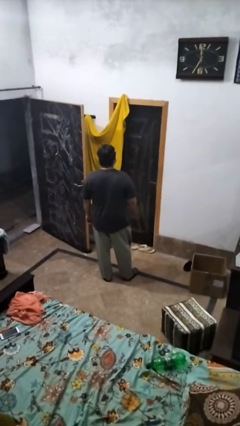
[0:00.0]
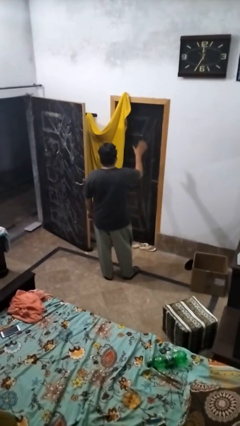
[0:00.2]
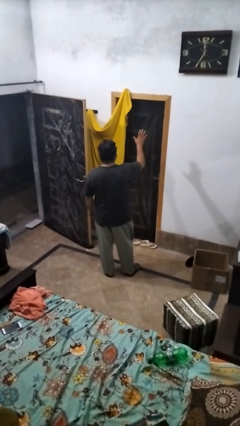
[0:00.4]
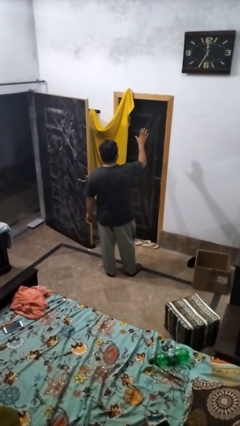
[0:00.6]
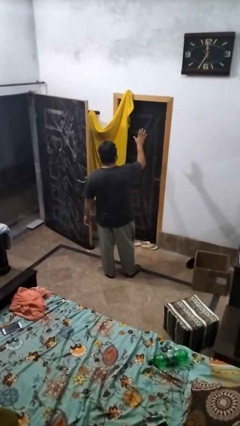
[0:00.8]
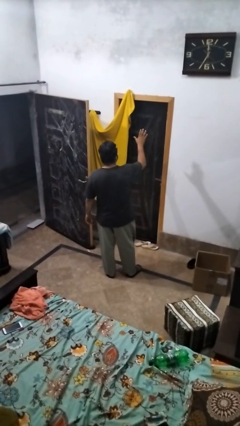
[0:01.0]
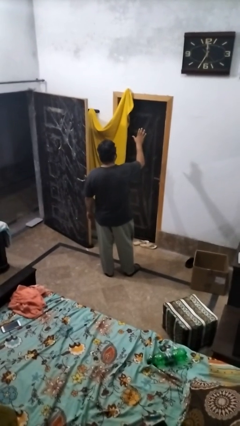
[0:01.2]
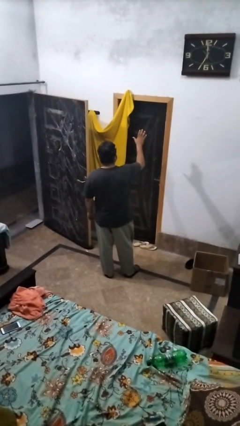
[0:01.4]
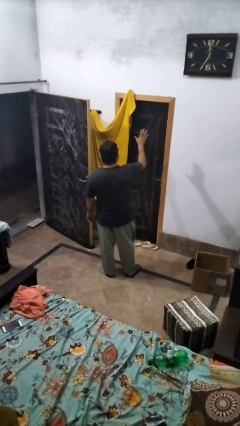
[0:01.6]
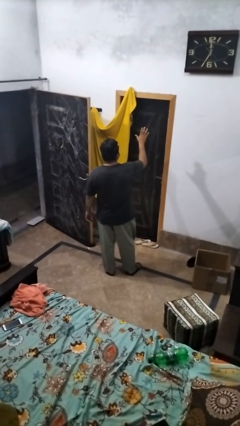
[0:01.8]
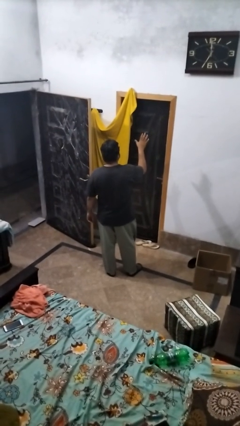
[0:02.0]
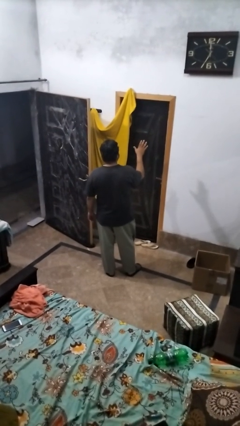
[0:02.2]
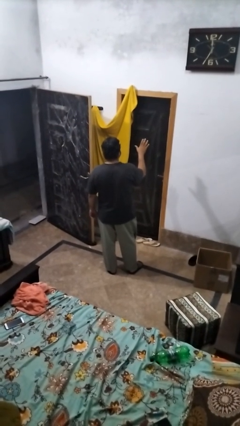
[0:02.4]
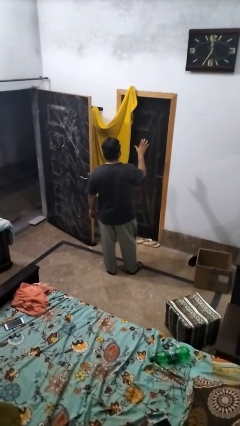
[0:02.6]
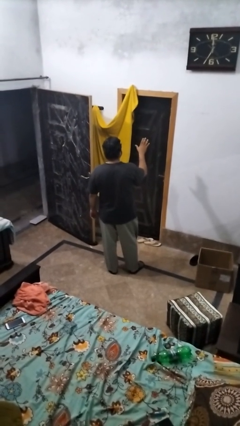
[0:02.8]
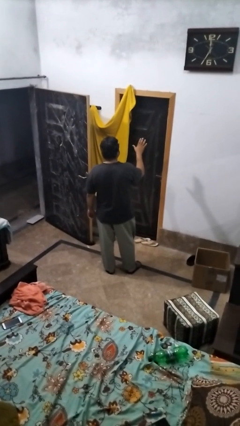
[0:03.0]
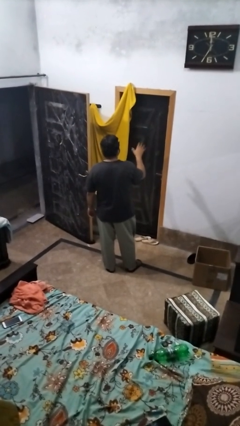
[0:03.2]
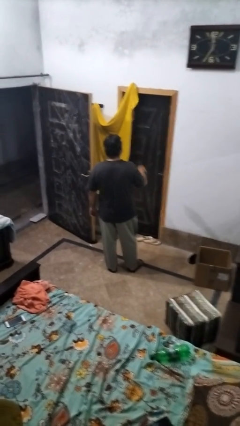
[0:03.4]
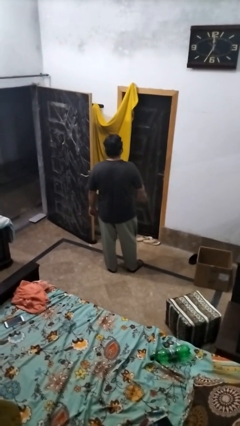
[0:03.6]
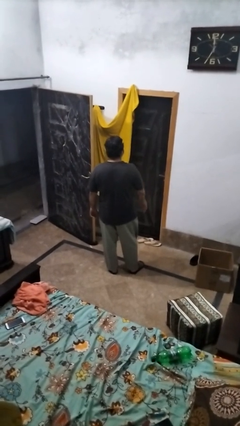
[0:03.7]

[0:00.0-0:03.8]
person gestures stop

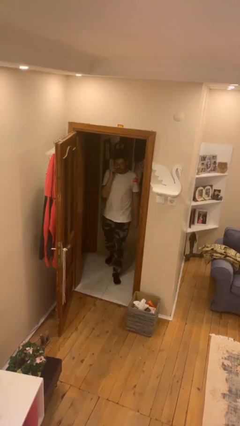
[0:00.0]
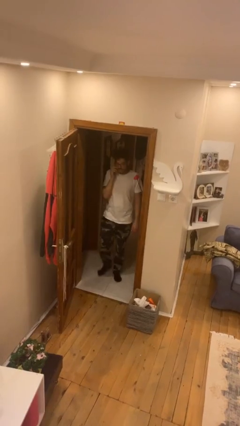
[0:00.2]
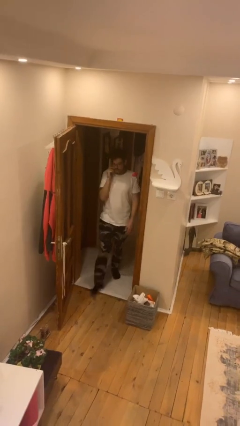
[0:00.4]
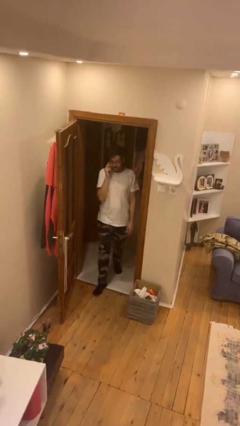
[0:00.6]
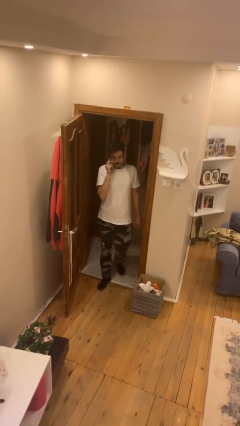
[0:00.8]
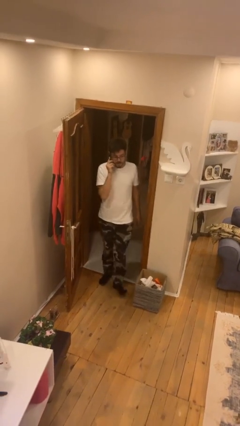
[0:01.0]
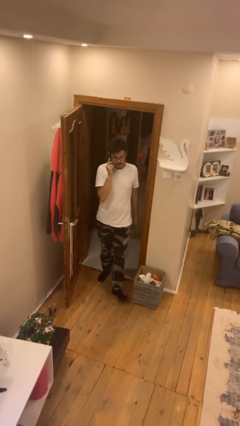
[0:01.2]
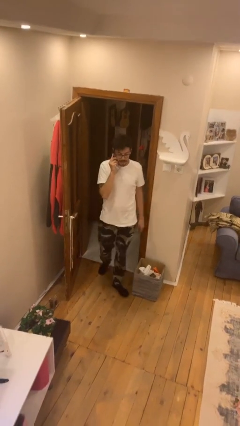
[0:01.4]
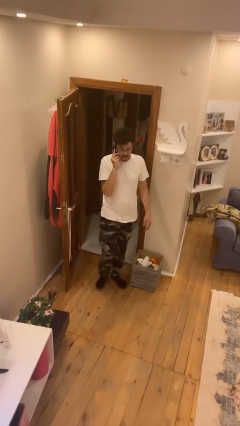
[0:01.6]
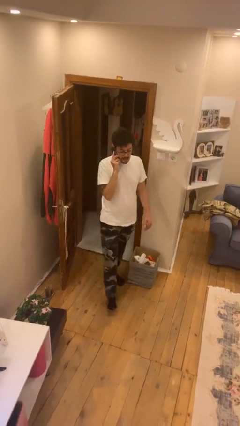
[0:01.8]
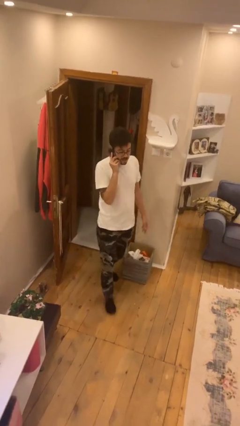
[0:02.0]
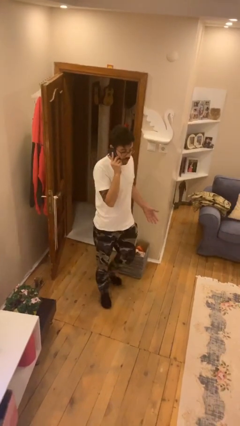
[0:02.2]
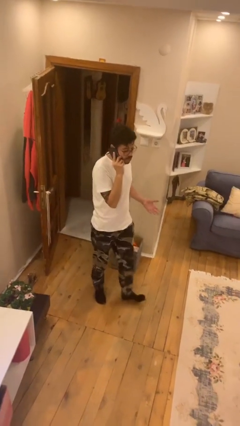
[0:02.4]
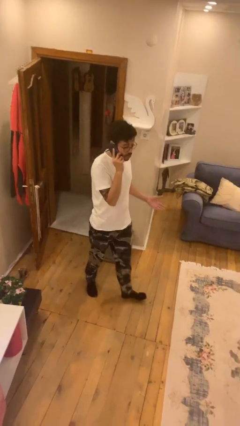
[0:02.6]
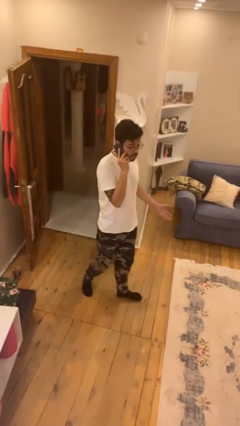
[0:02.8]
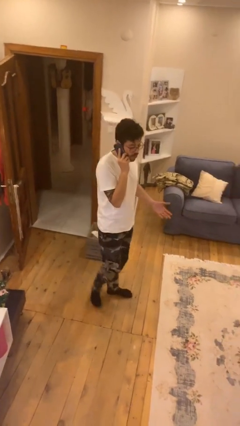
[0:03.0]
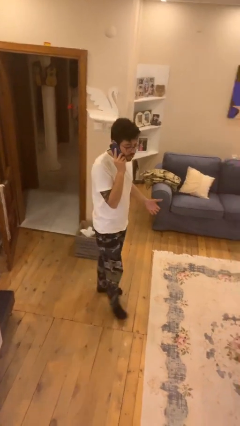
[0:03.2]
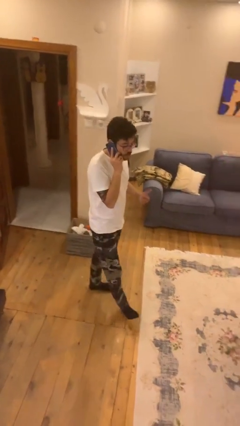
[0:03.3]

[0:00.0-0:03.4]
person enters scene through structure

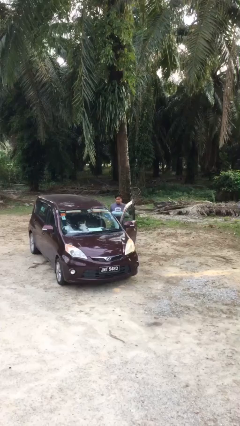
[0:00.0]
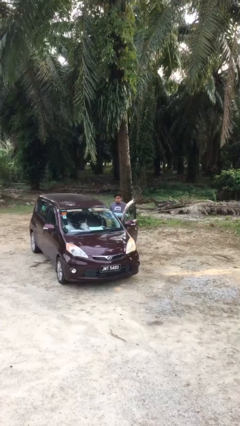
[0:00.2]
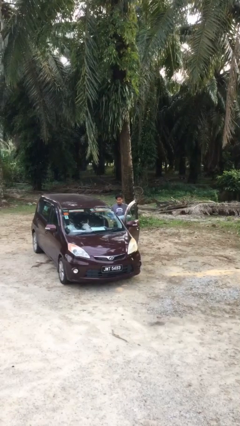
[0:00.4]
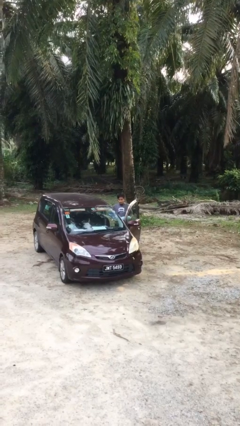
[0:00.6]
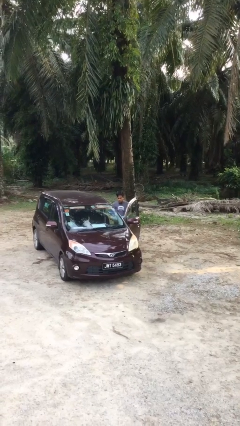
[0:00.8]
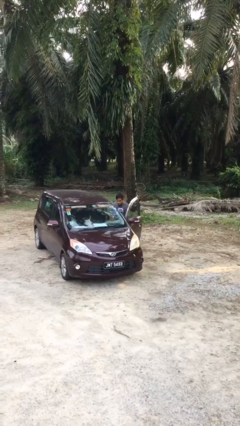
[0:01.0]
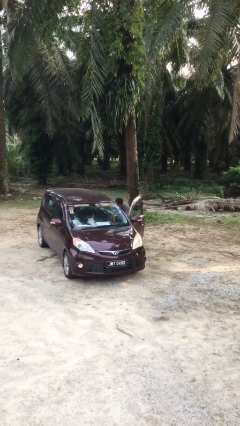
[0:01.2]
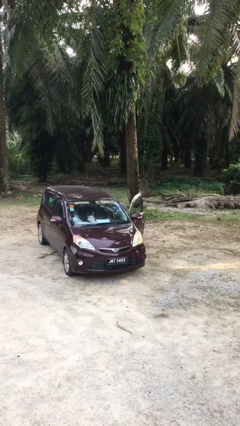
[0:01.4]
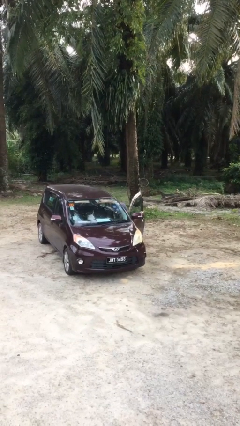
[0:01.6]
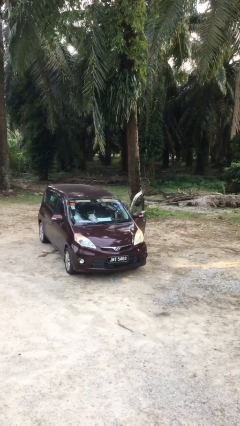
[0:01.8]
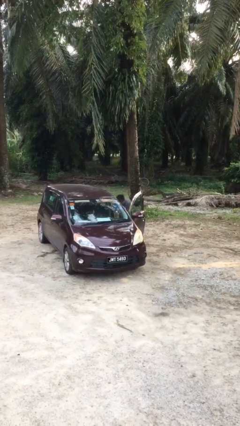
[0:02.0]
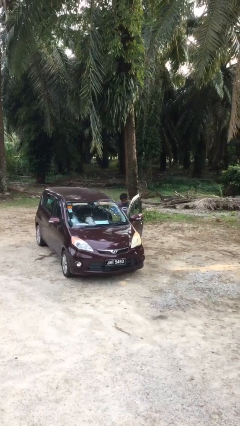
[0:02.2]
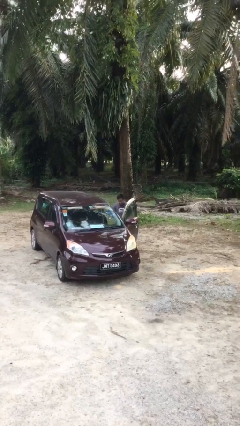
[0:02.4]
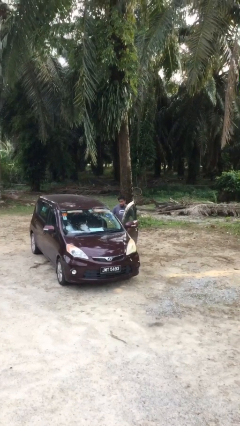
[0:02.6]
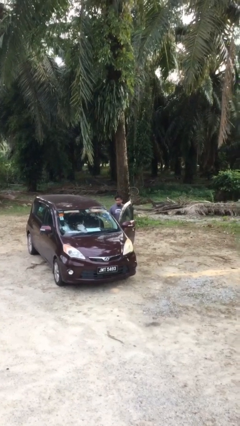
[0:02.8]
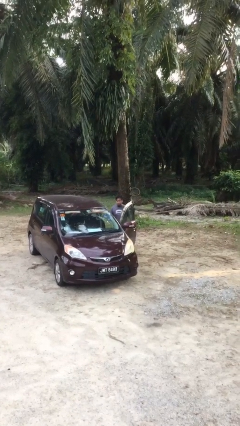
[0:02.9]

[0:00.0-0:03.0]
person loads car

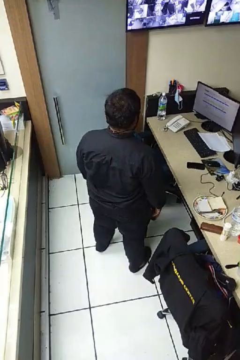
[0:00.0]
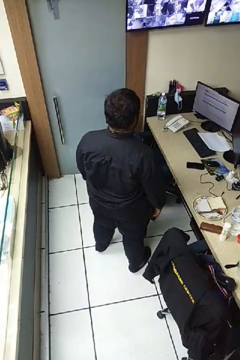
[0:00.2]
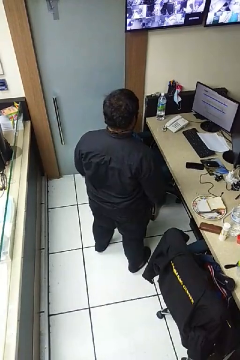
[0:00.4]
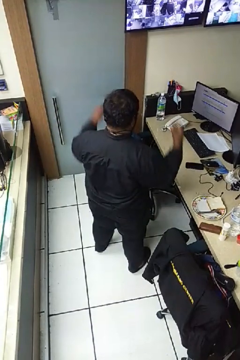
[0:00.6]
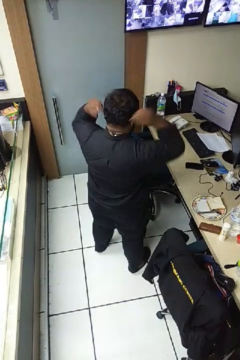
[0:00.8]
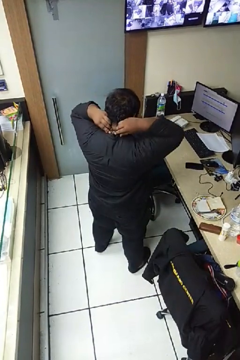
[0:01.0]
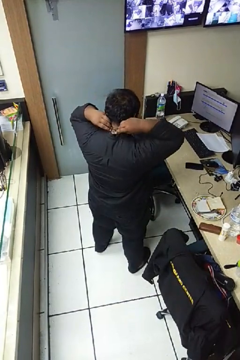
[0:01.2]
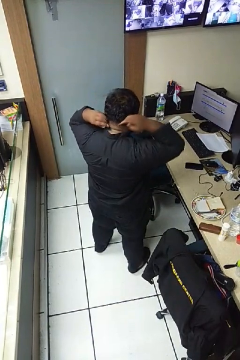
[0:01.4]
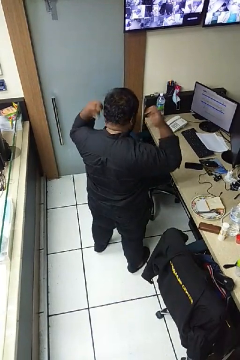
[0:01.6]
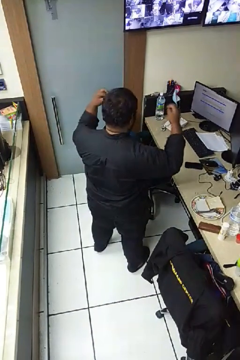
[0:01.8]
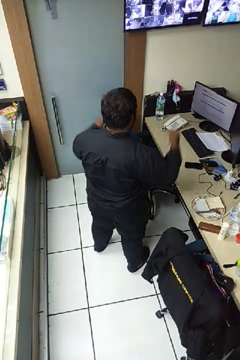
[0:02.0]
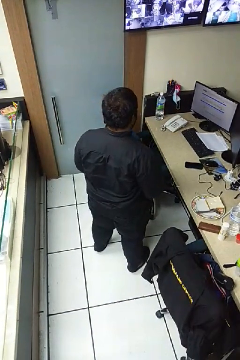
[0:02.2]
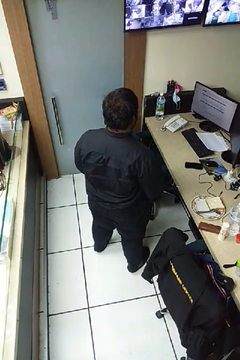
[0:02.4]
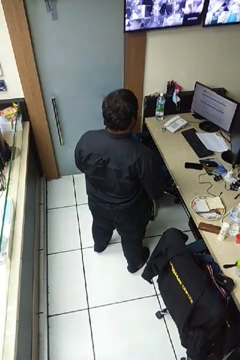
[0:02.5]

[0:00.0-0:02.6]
person takes off necklace

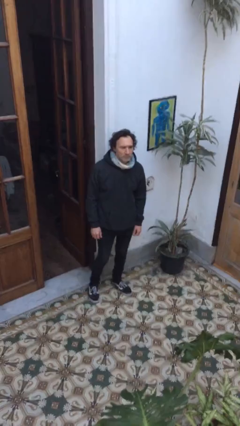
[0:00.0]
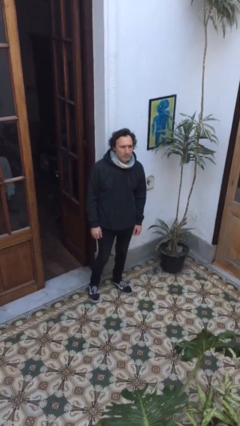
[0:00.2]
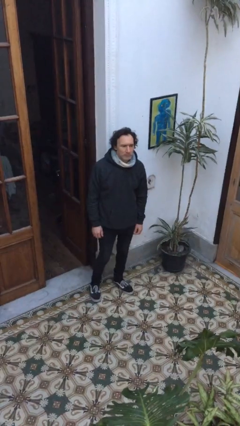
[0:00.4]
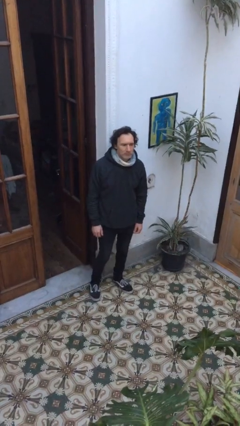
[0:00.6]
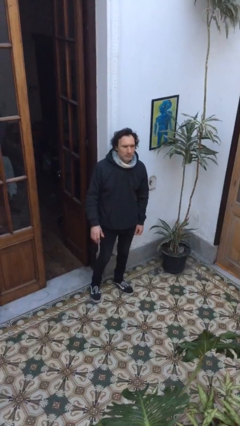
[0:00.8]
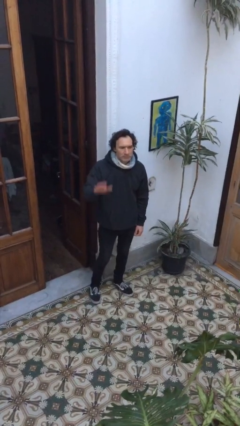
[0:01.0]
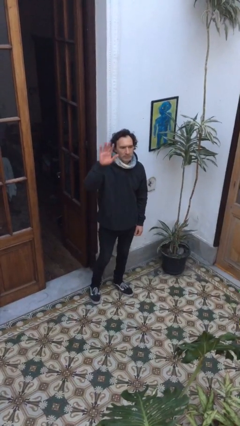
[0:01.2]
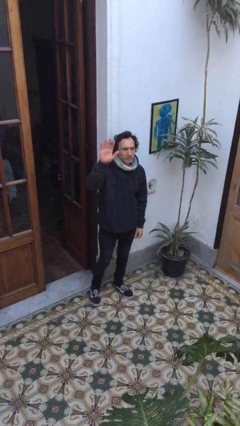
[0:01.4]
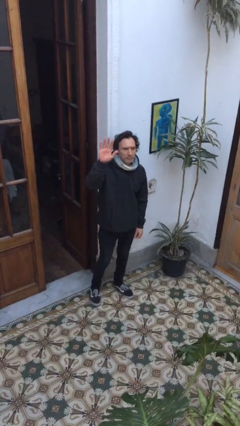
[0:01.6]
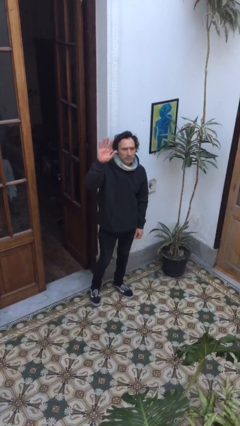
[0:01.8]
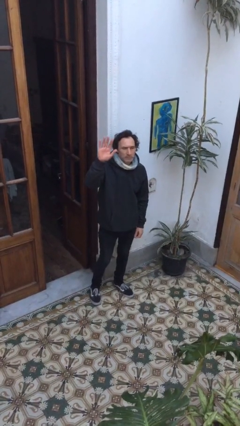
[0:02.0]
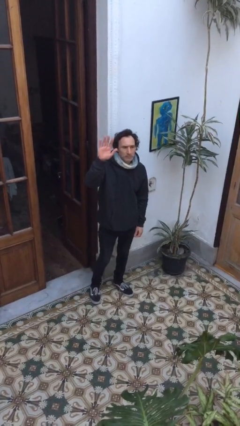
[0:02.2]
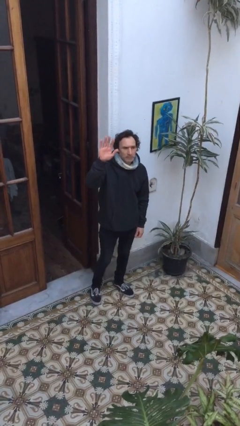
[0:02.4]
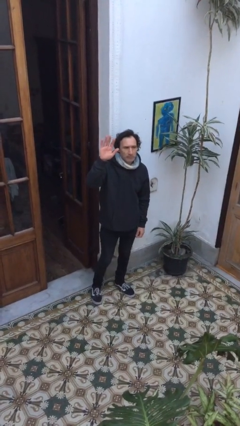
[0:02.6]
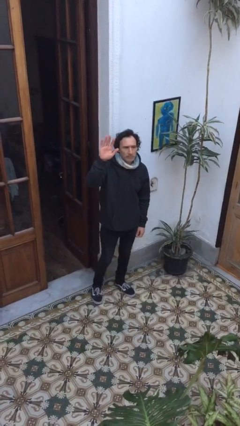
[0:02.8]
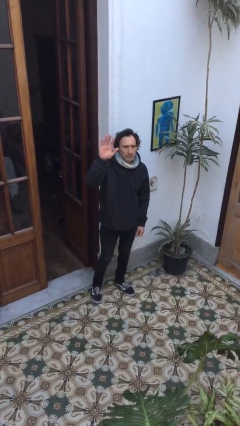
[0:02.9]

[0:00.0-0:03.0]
person gestures raise hand

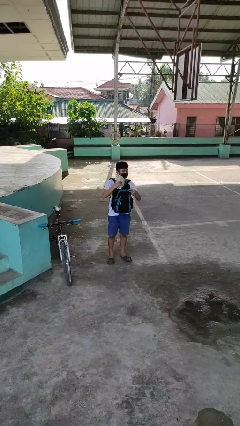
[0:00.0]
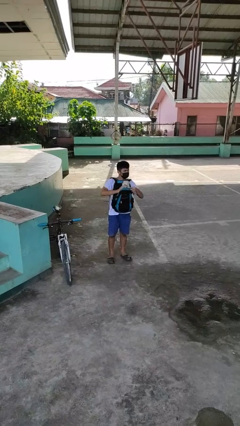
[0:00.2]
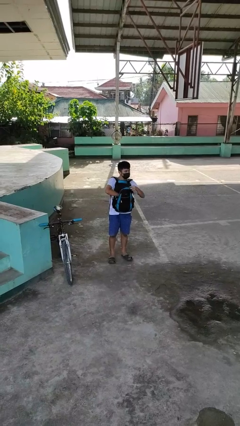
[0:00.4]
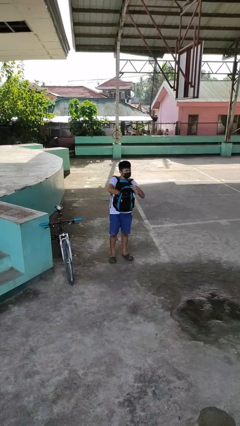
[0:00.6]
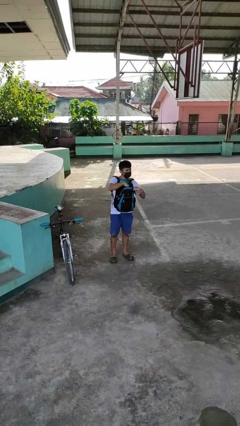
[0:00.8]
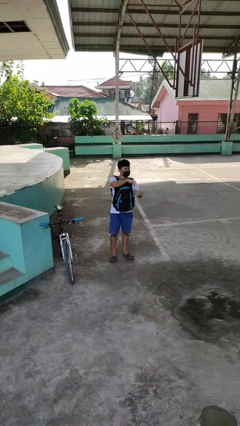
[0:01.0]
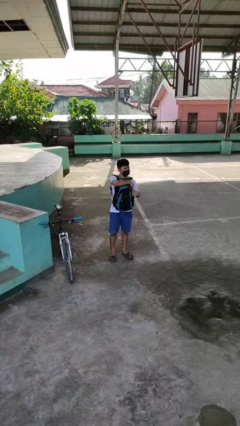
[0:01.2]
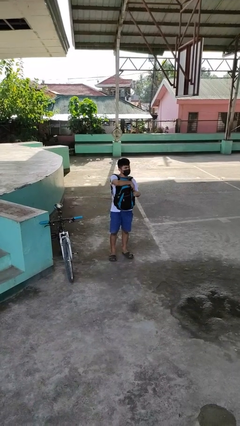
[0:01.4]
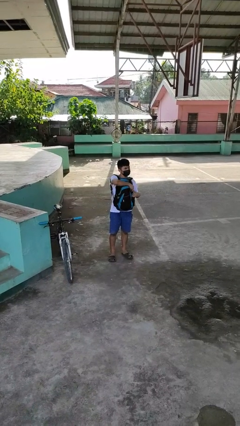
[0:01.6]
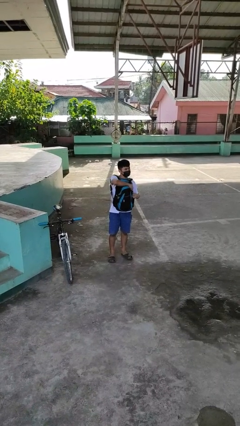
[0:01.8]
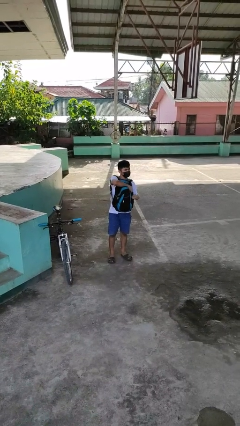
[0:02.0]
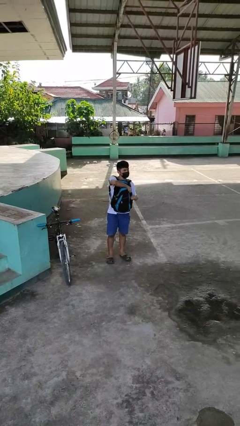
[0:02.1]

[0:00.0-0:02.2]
person puts object into backpack
